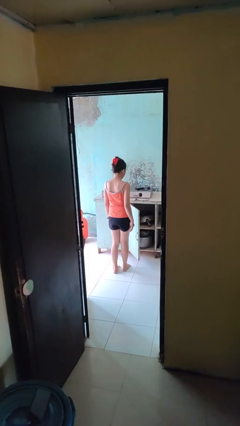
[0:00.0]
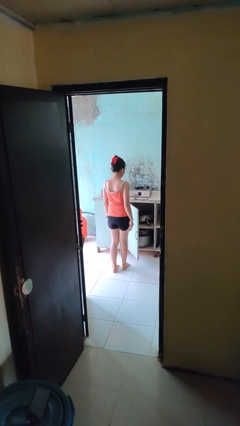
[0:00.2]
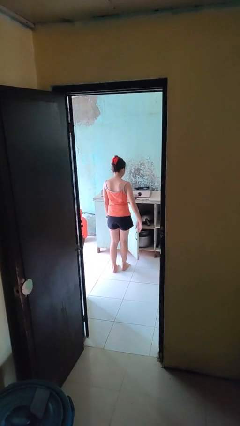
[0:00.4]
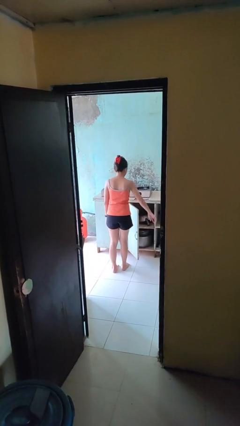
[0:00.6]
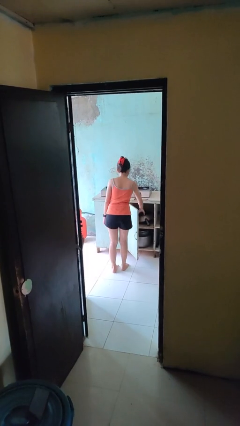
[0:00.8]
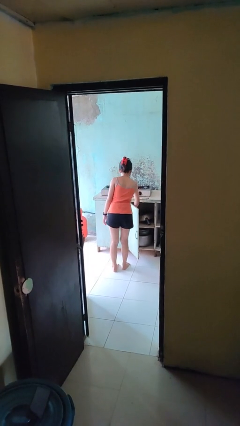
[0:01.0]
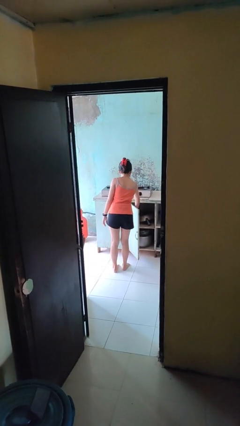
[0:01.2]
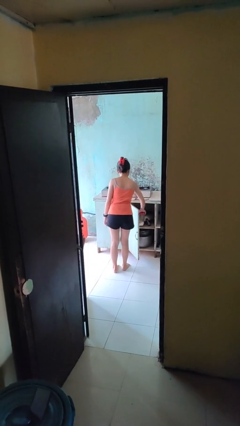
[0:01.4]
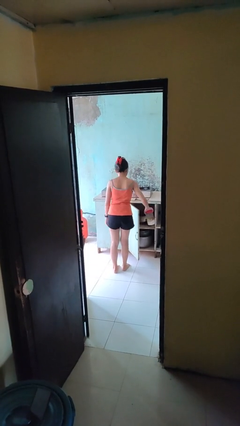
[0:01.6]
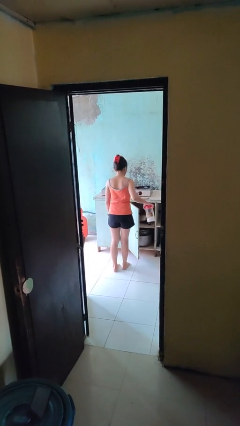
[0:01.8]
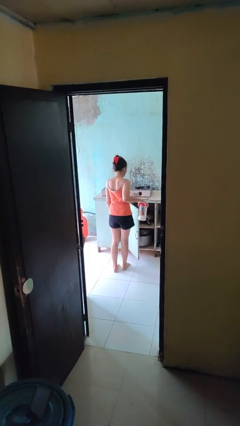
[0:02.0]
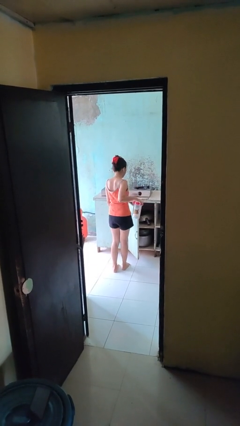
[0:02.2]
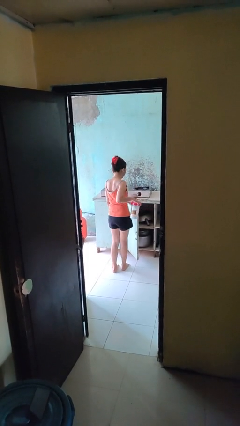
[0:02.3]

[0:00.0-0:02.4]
person picks up object from cabinet

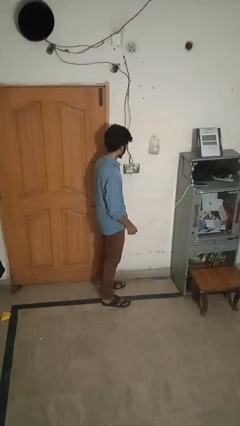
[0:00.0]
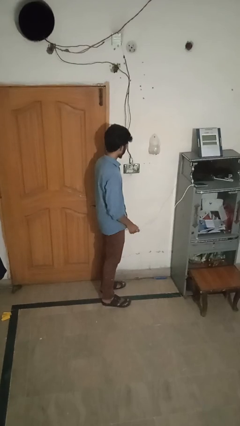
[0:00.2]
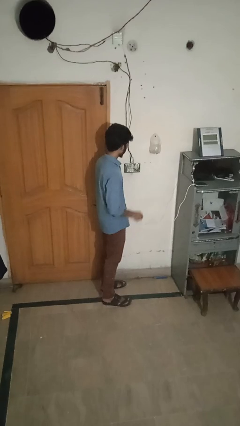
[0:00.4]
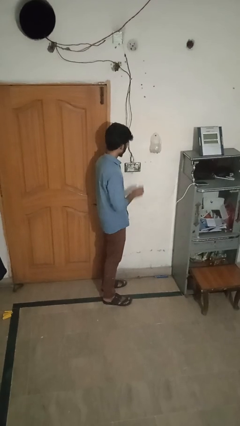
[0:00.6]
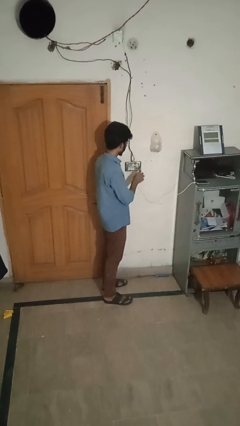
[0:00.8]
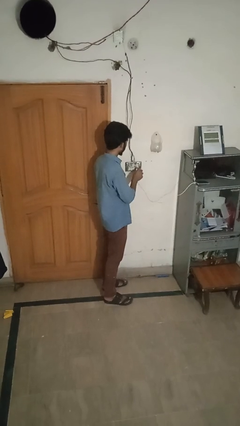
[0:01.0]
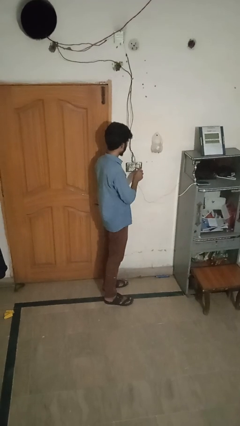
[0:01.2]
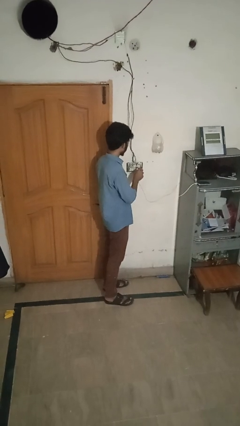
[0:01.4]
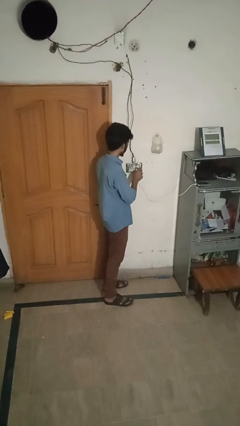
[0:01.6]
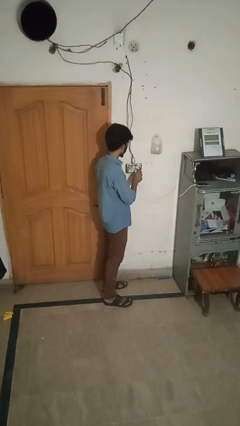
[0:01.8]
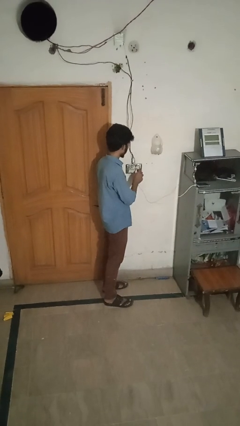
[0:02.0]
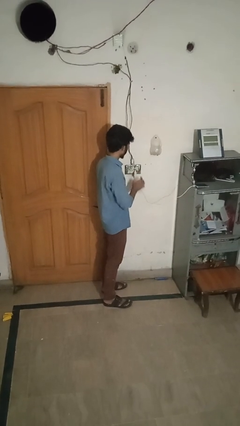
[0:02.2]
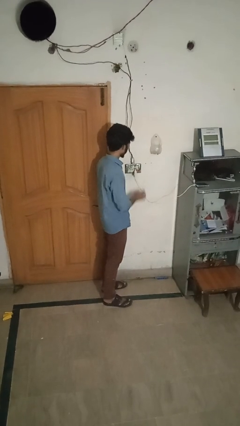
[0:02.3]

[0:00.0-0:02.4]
person plugs into electrical socket

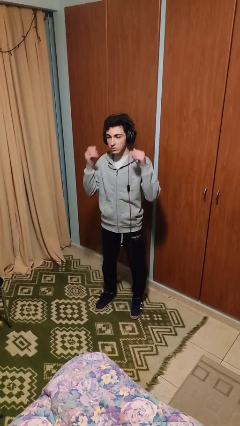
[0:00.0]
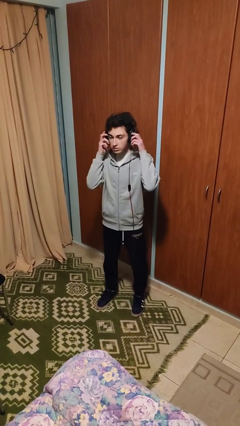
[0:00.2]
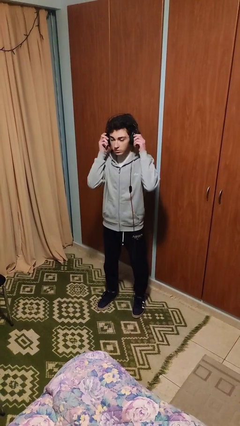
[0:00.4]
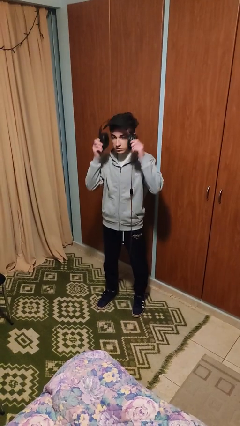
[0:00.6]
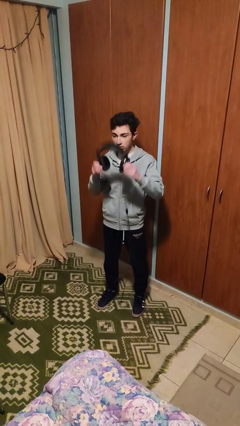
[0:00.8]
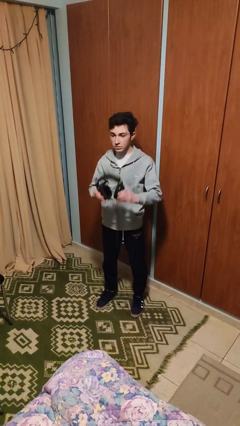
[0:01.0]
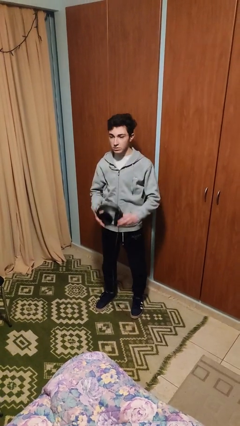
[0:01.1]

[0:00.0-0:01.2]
person takes off headphones

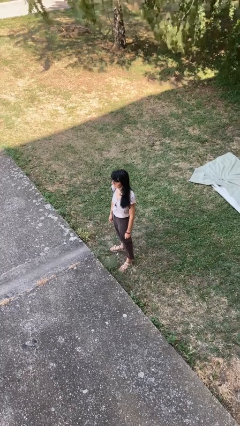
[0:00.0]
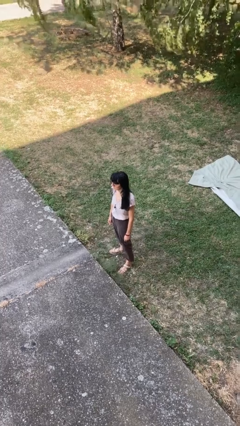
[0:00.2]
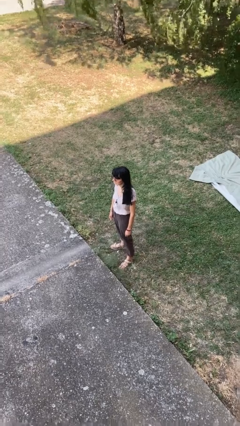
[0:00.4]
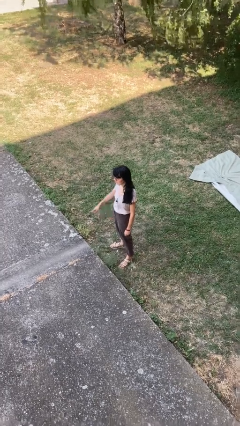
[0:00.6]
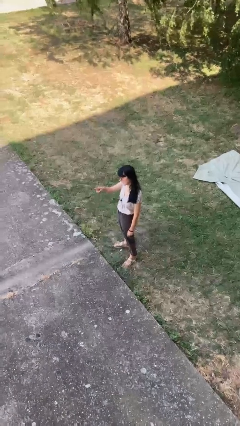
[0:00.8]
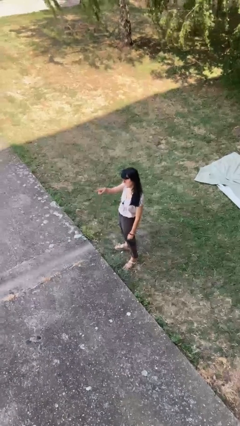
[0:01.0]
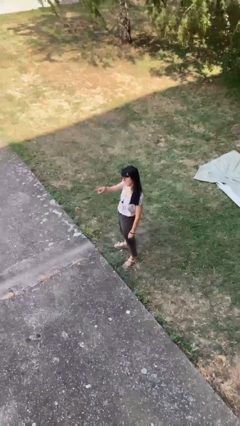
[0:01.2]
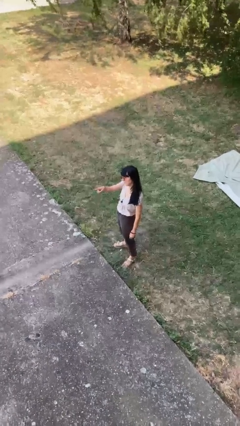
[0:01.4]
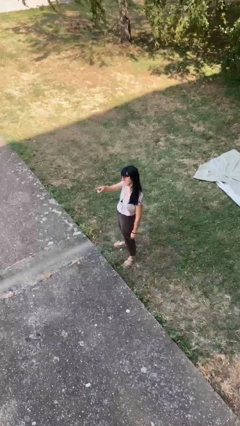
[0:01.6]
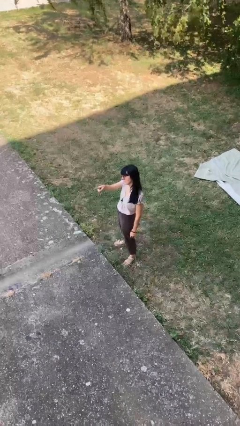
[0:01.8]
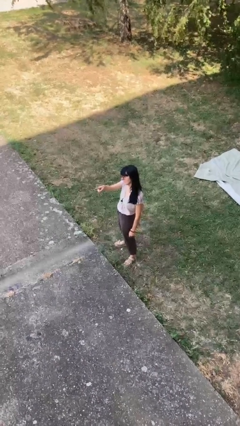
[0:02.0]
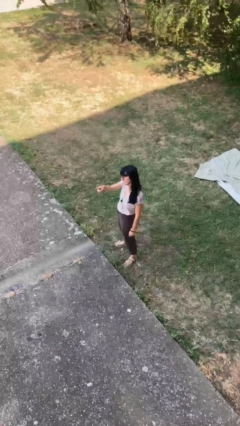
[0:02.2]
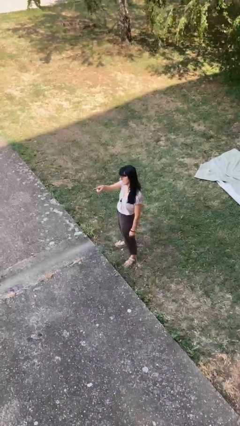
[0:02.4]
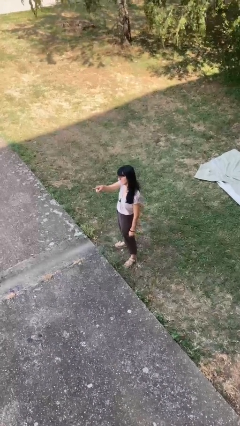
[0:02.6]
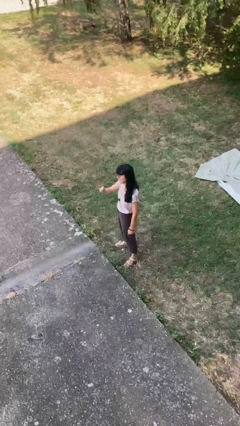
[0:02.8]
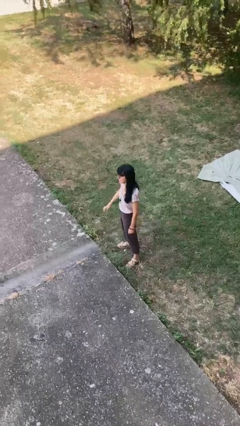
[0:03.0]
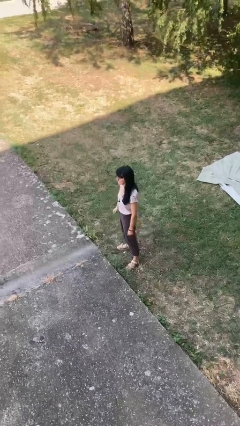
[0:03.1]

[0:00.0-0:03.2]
person points at person

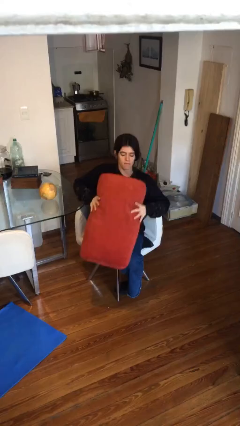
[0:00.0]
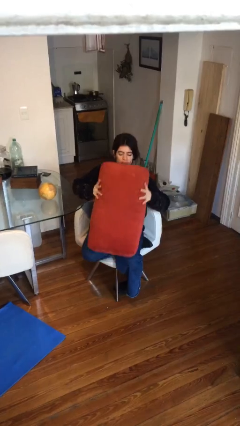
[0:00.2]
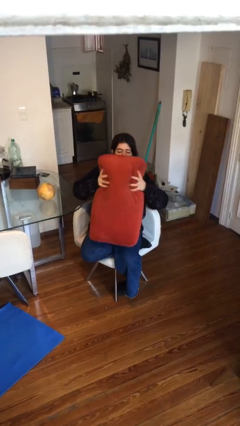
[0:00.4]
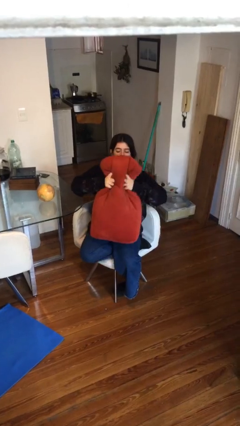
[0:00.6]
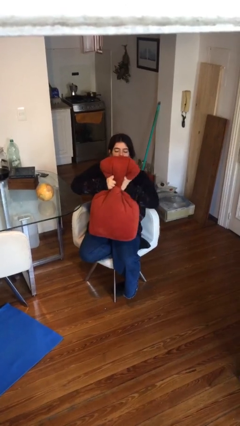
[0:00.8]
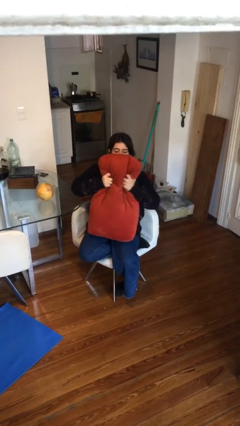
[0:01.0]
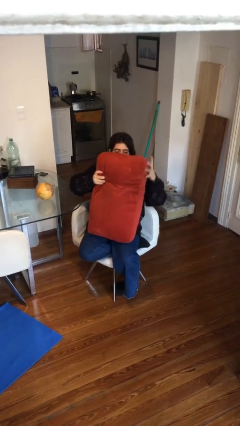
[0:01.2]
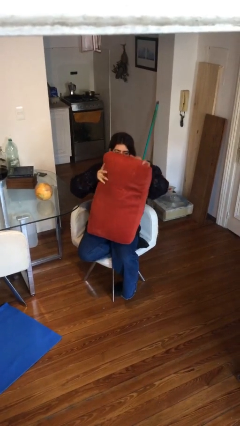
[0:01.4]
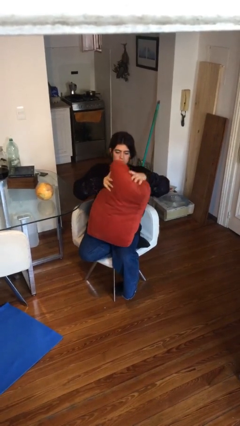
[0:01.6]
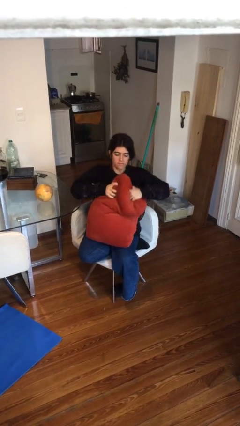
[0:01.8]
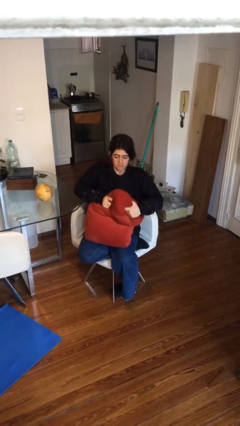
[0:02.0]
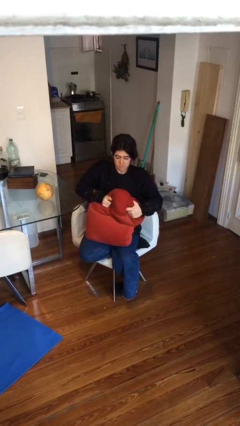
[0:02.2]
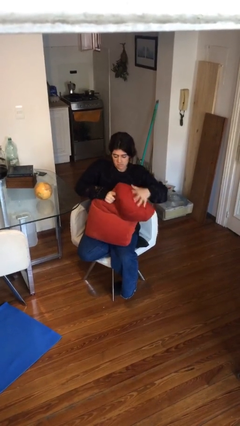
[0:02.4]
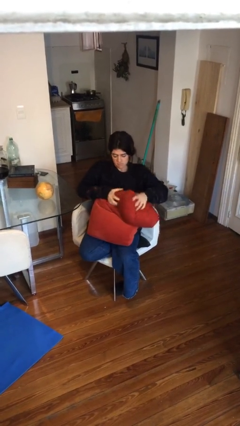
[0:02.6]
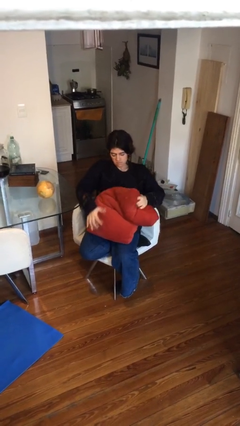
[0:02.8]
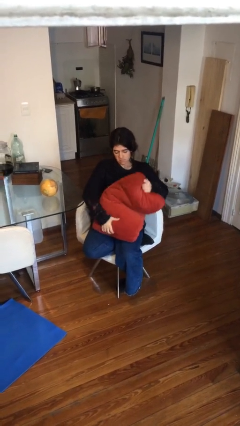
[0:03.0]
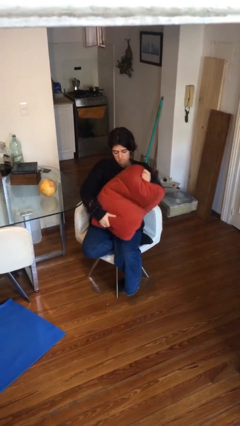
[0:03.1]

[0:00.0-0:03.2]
person squeezes object

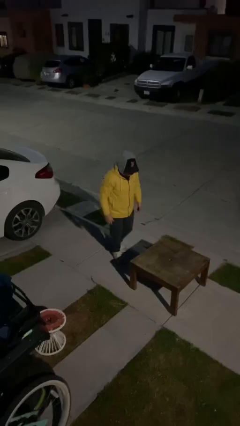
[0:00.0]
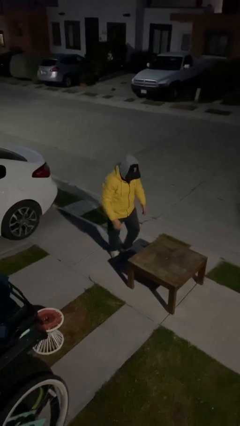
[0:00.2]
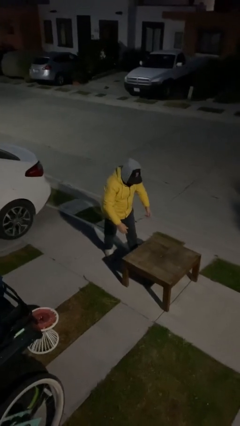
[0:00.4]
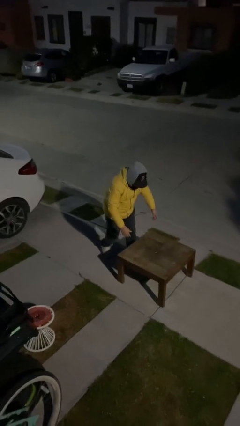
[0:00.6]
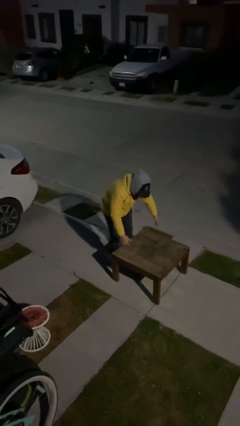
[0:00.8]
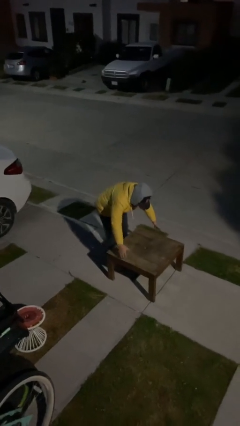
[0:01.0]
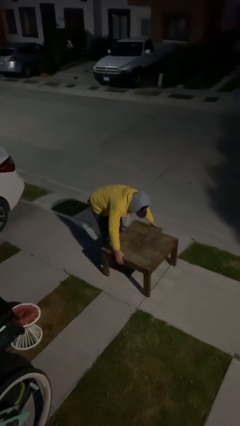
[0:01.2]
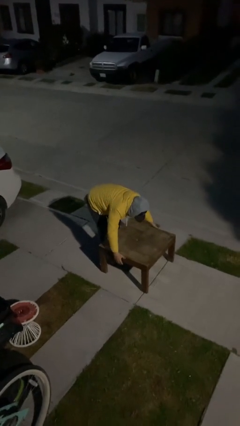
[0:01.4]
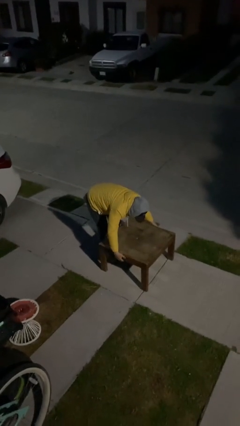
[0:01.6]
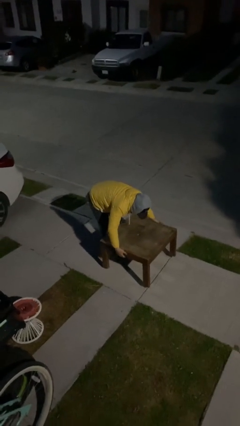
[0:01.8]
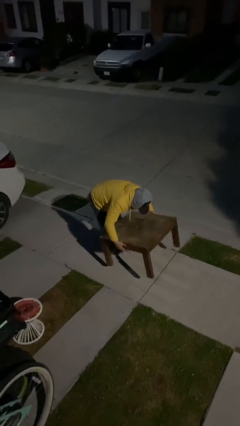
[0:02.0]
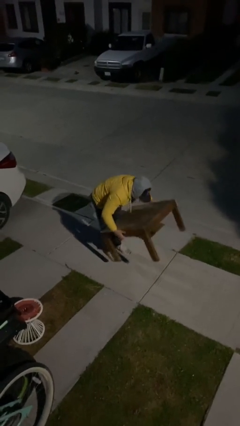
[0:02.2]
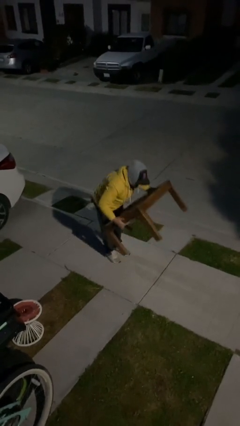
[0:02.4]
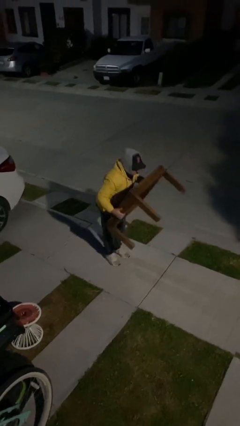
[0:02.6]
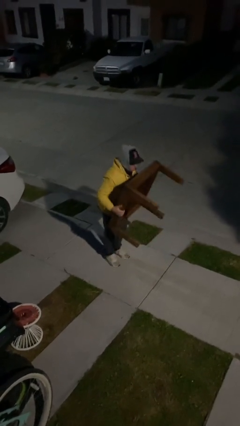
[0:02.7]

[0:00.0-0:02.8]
person picks up object from floor

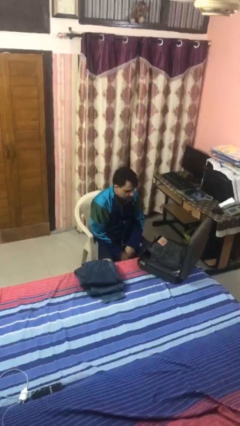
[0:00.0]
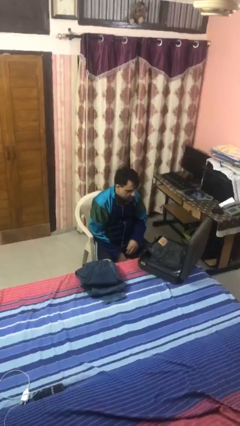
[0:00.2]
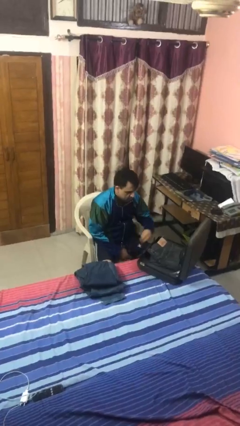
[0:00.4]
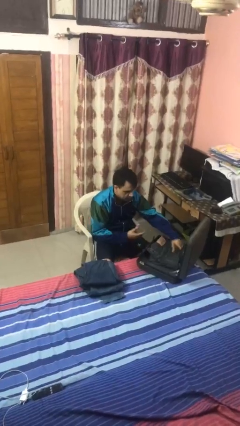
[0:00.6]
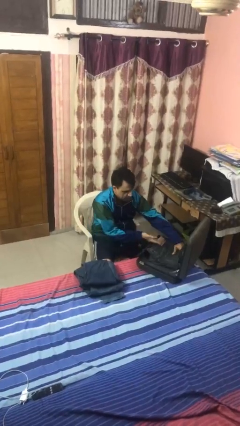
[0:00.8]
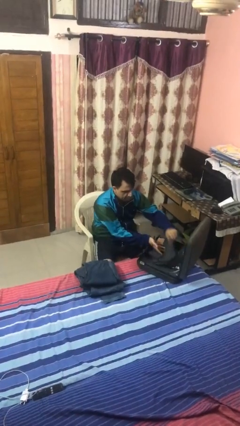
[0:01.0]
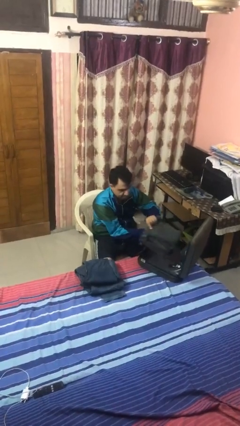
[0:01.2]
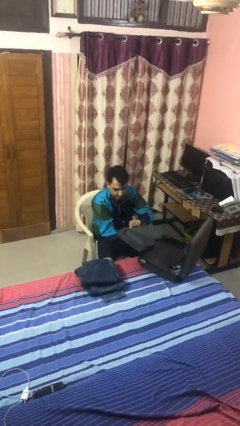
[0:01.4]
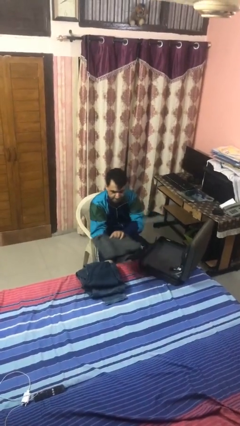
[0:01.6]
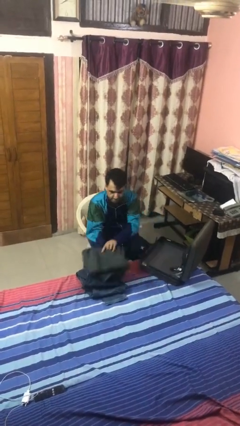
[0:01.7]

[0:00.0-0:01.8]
person unloads clothes from suitcase

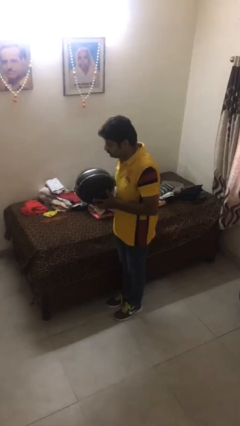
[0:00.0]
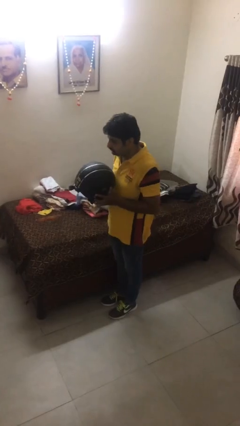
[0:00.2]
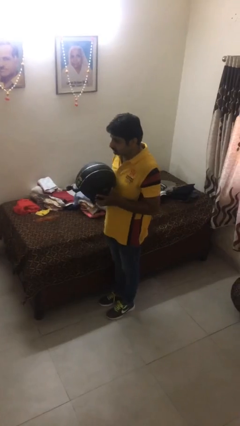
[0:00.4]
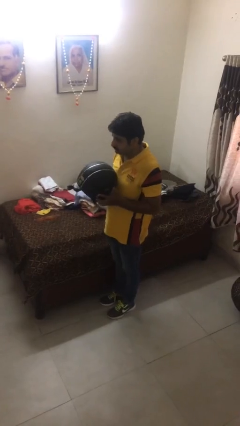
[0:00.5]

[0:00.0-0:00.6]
person picks up object from bed
